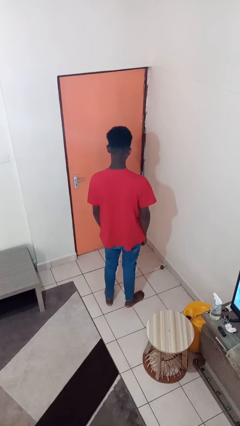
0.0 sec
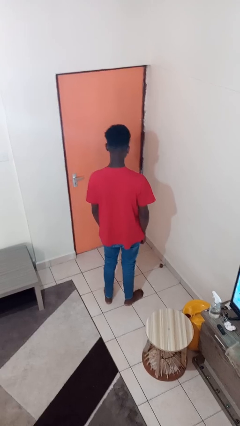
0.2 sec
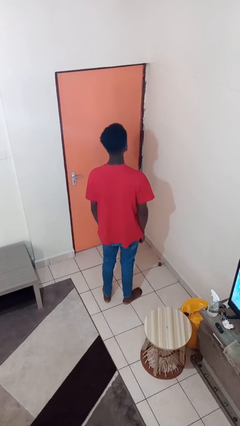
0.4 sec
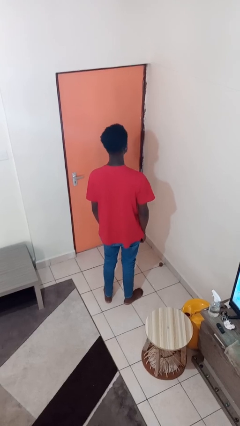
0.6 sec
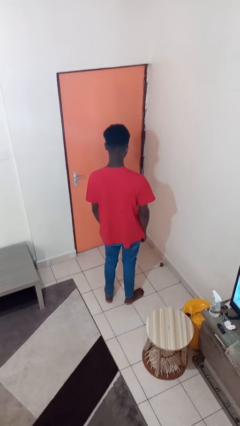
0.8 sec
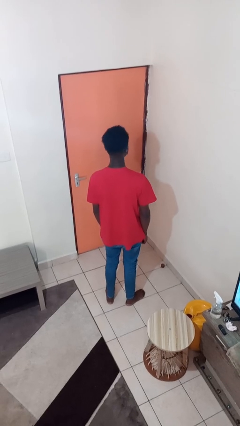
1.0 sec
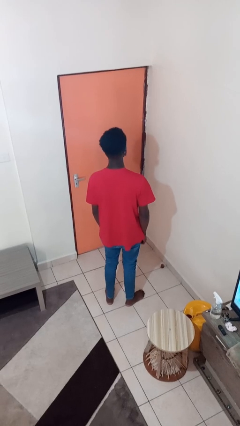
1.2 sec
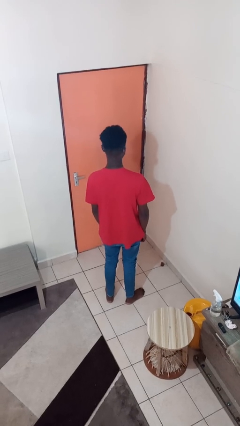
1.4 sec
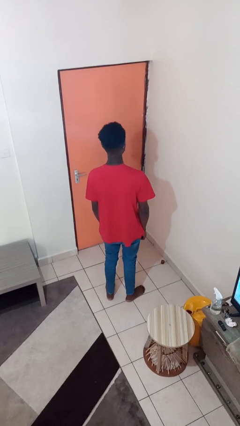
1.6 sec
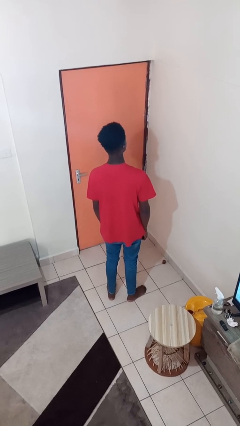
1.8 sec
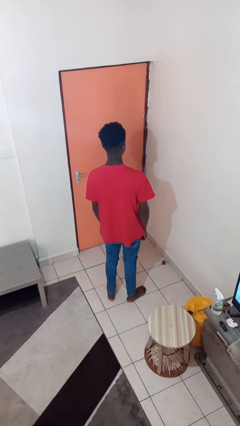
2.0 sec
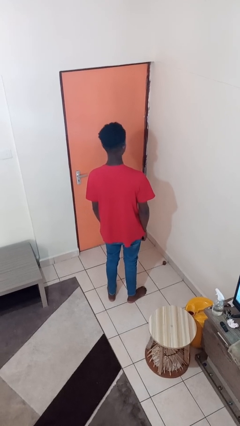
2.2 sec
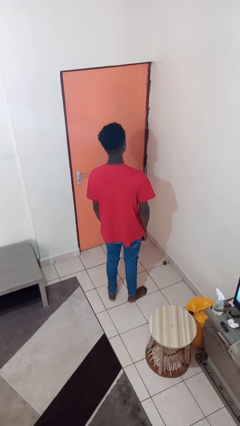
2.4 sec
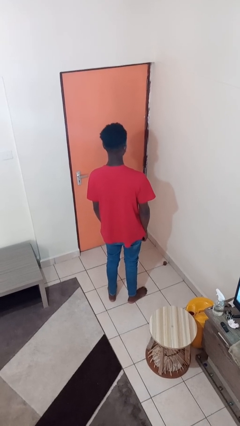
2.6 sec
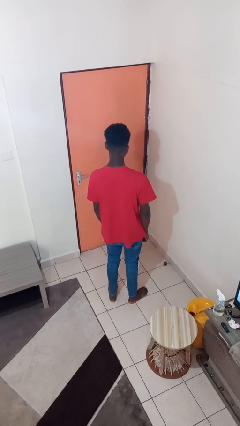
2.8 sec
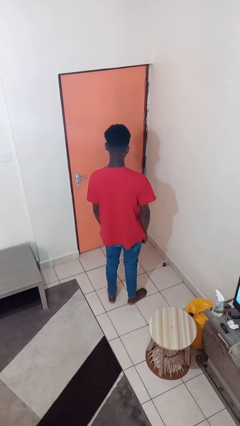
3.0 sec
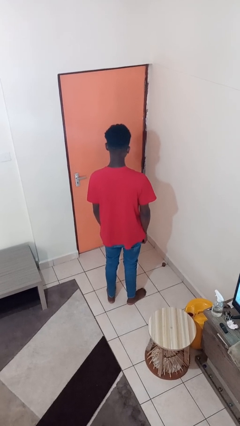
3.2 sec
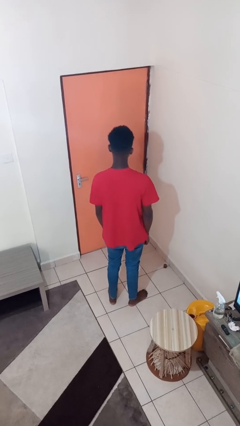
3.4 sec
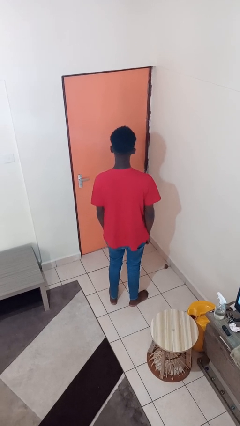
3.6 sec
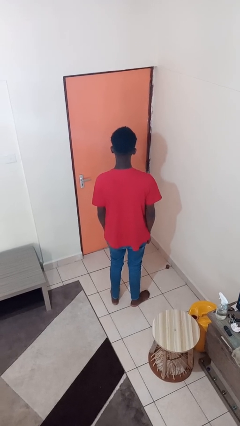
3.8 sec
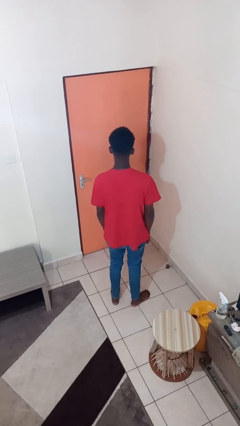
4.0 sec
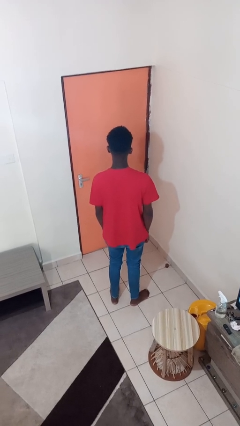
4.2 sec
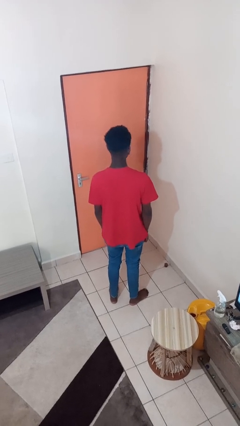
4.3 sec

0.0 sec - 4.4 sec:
person nods head

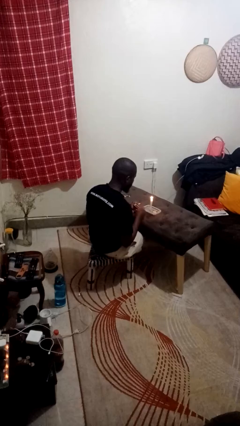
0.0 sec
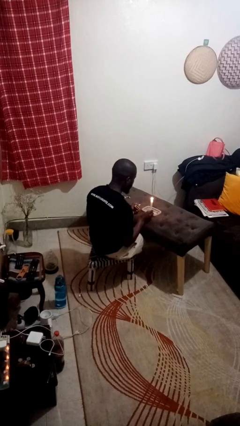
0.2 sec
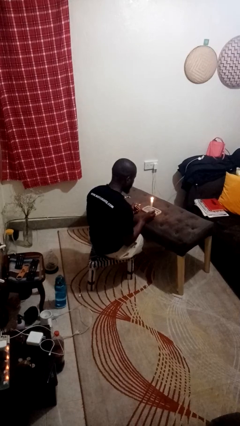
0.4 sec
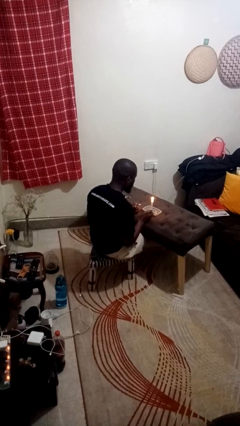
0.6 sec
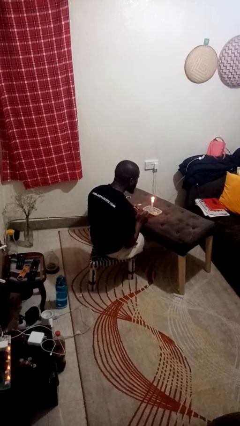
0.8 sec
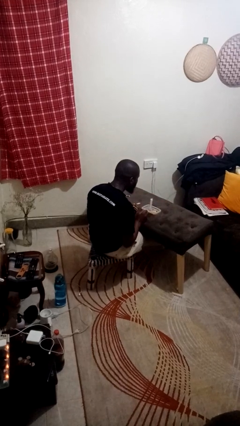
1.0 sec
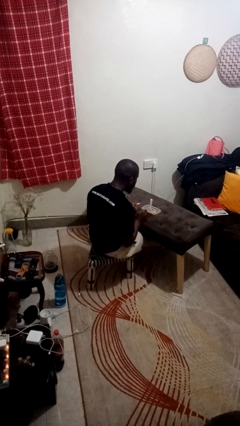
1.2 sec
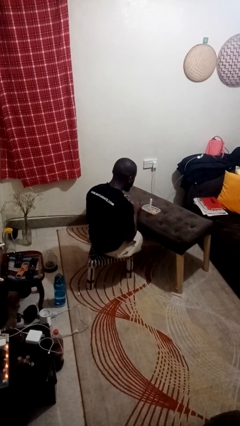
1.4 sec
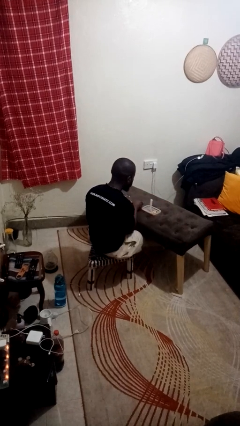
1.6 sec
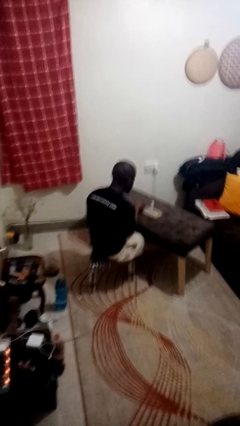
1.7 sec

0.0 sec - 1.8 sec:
person extinguishes candle

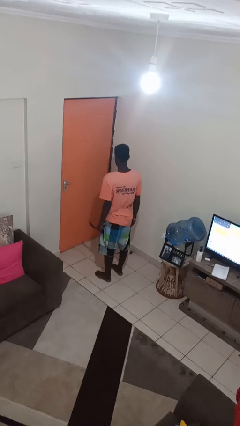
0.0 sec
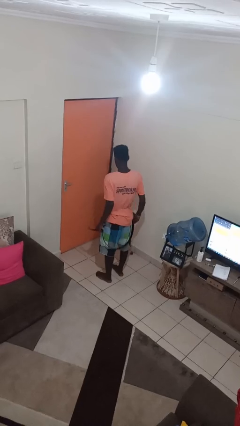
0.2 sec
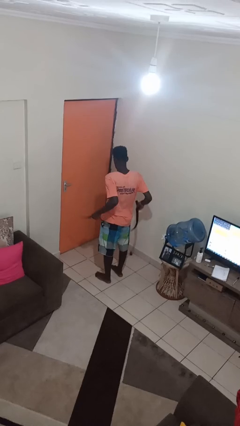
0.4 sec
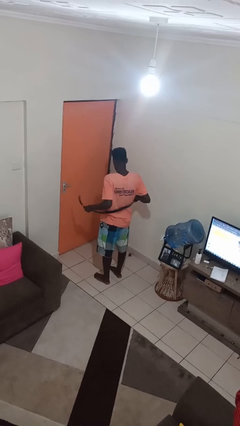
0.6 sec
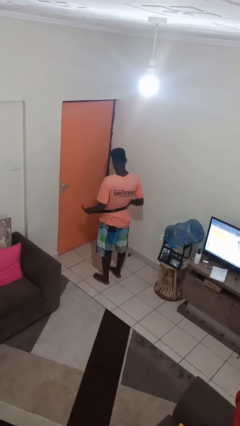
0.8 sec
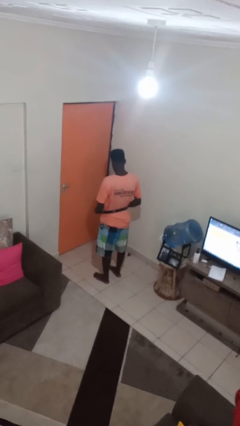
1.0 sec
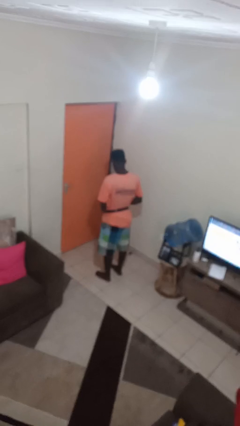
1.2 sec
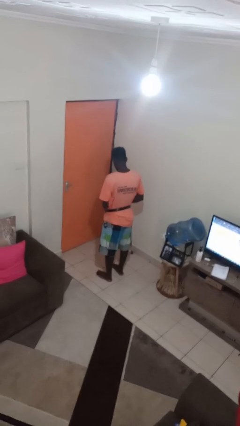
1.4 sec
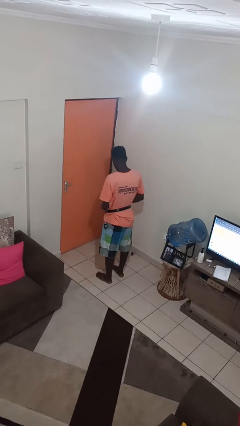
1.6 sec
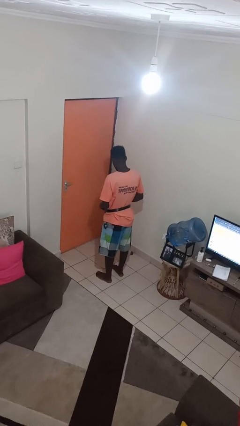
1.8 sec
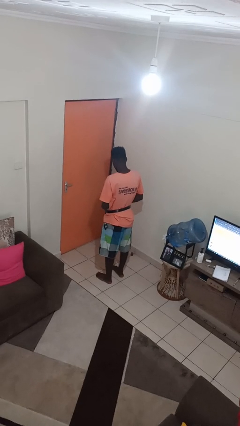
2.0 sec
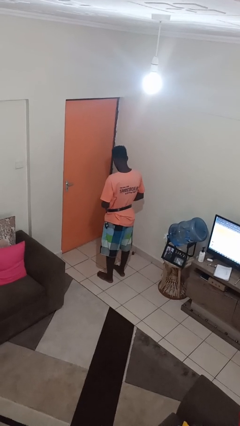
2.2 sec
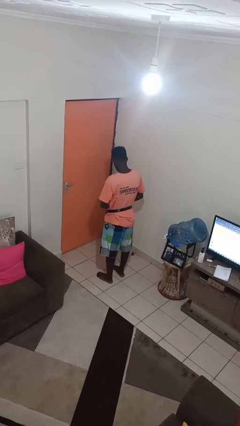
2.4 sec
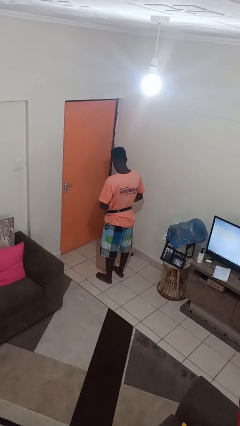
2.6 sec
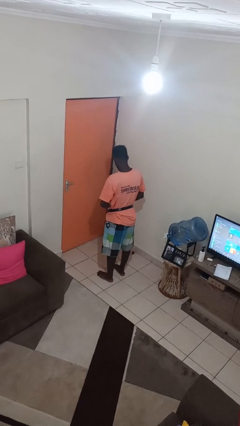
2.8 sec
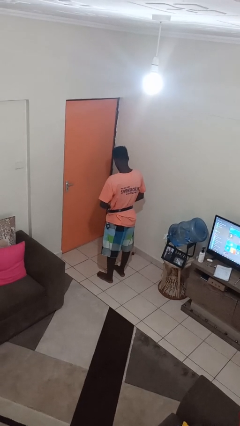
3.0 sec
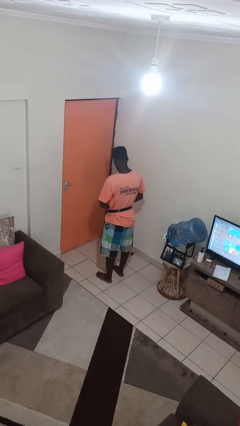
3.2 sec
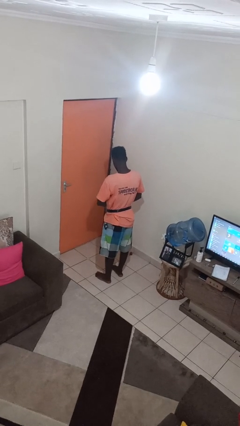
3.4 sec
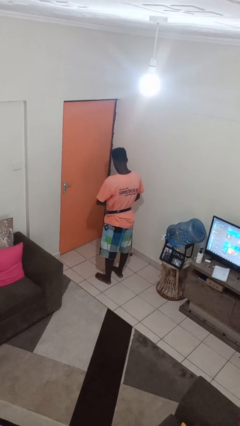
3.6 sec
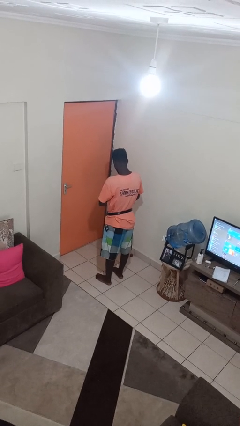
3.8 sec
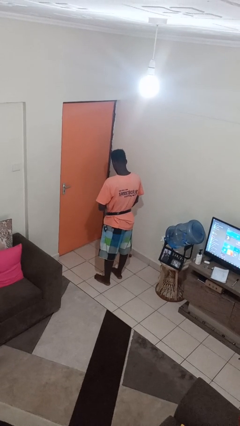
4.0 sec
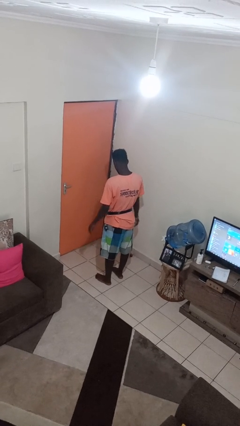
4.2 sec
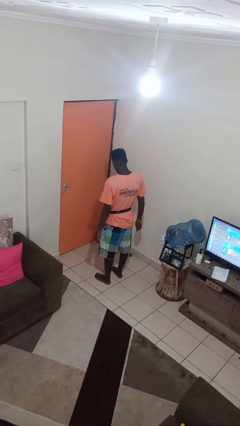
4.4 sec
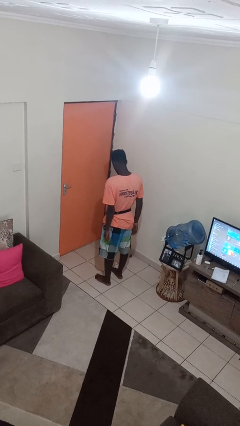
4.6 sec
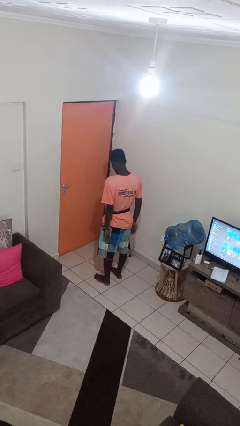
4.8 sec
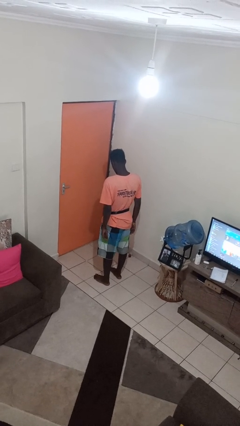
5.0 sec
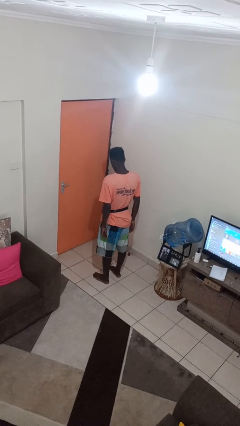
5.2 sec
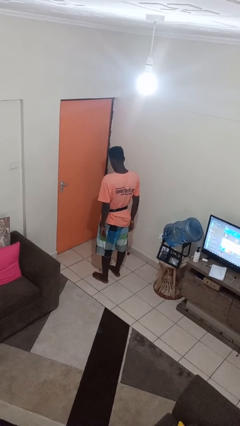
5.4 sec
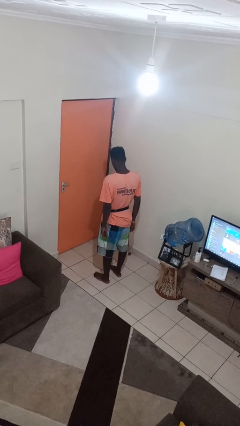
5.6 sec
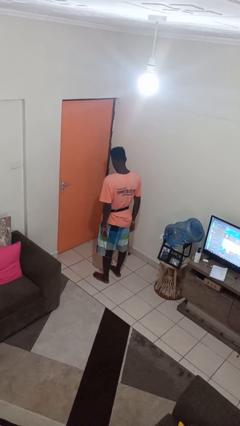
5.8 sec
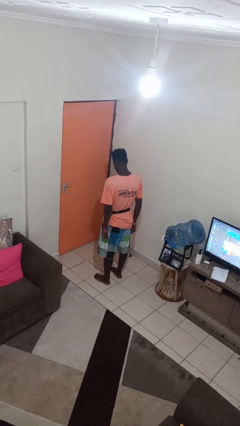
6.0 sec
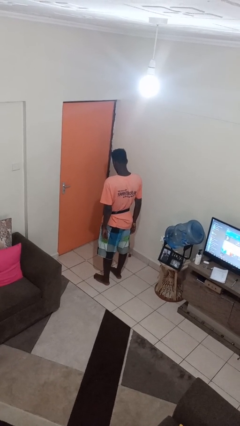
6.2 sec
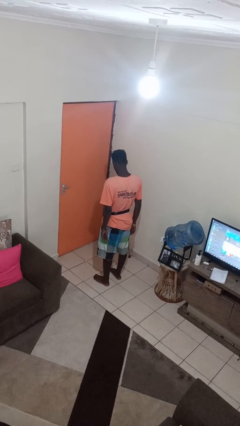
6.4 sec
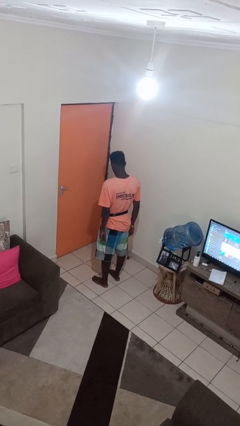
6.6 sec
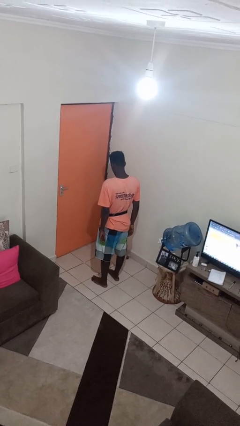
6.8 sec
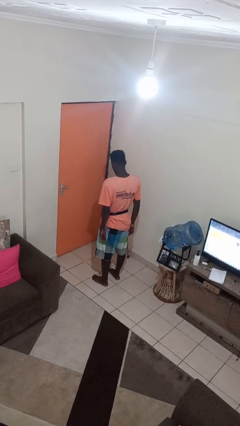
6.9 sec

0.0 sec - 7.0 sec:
person puts on belt

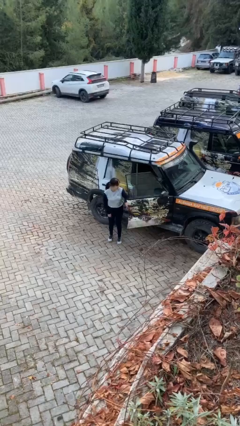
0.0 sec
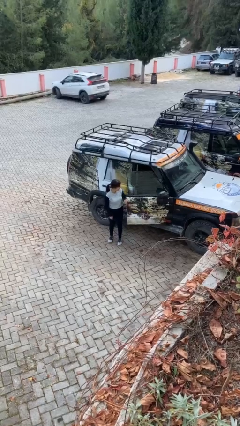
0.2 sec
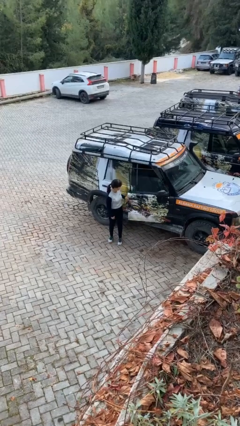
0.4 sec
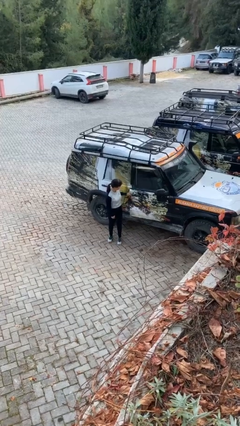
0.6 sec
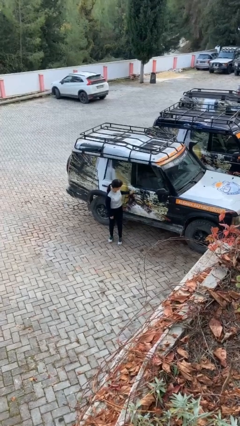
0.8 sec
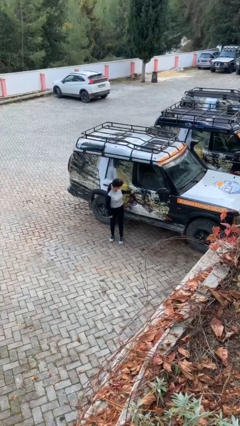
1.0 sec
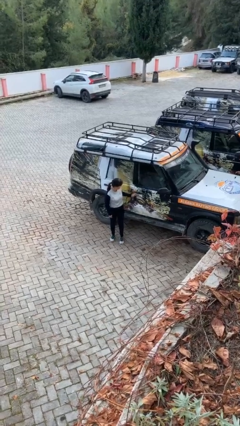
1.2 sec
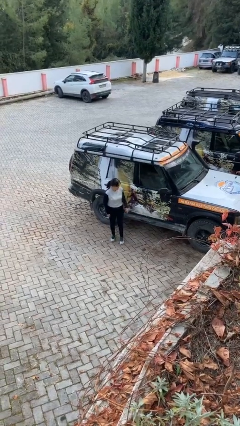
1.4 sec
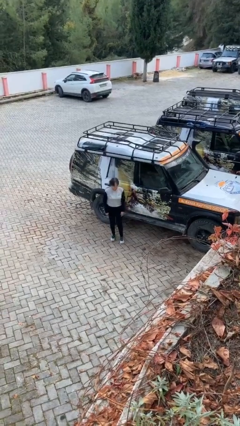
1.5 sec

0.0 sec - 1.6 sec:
person closes car door

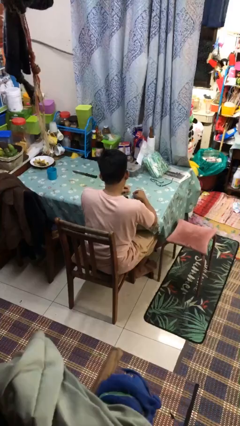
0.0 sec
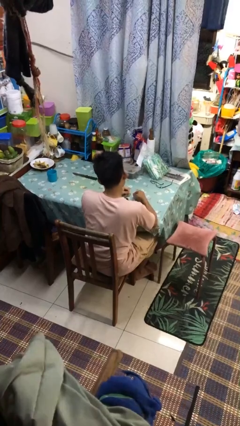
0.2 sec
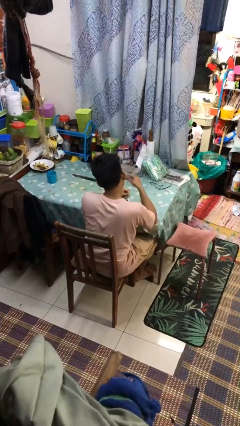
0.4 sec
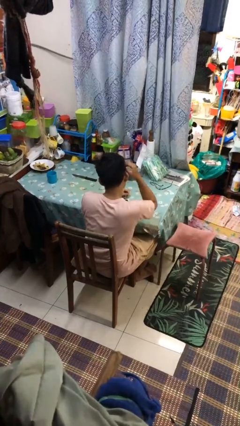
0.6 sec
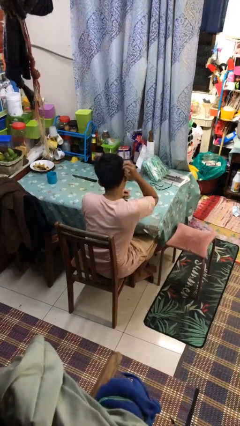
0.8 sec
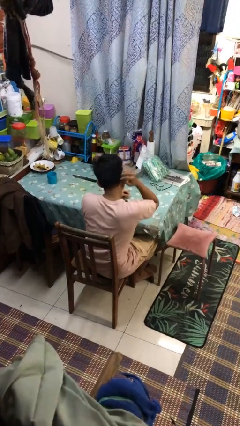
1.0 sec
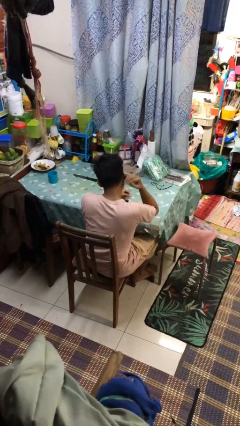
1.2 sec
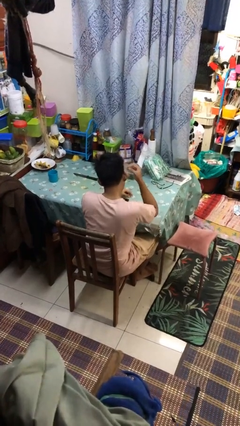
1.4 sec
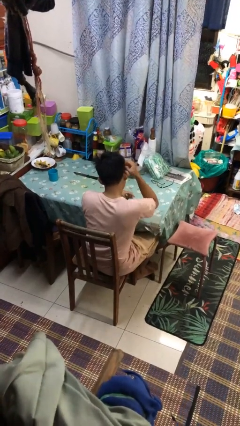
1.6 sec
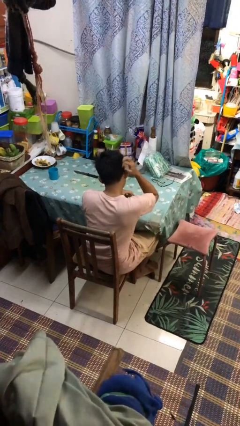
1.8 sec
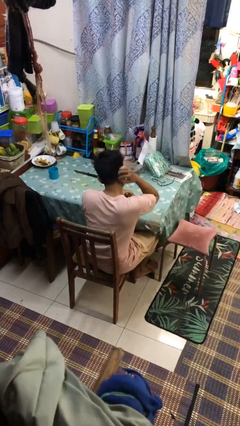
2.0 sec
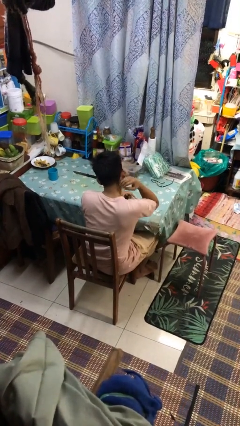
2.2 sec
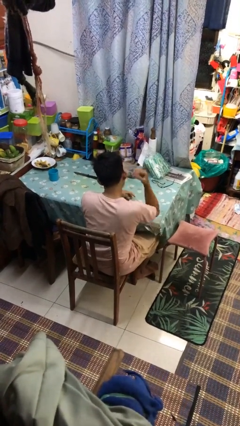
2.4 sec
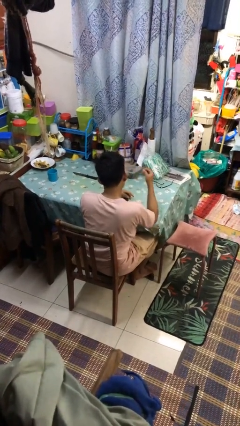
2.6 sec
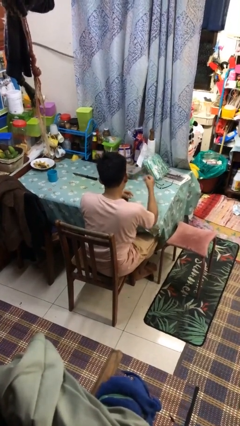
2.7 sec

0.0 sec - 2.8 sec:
person strokes hair
